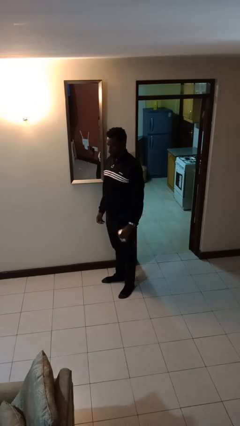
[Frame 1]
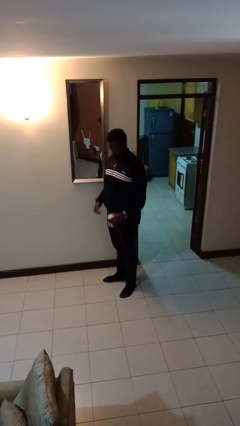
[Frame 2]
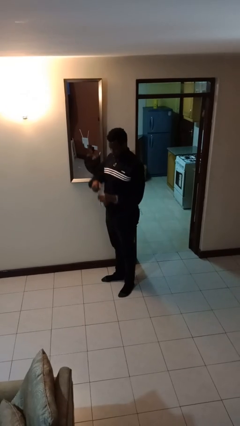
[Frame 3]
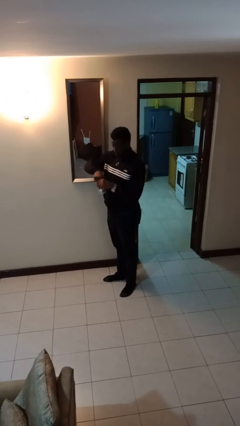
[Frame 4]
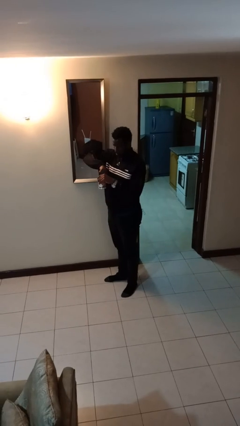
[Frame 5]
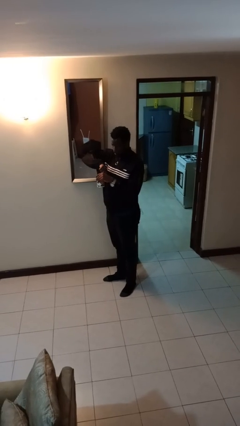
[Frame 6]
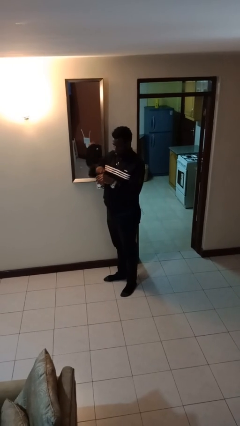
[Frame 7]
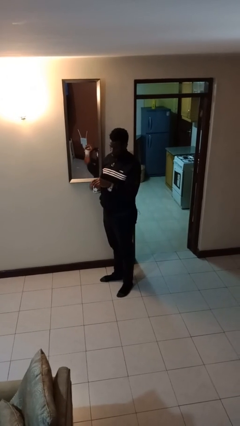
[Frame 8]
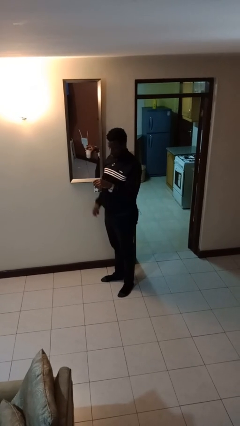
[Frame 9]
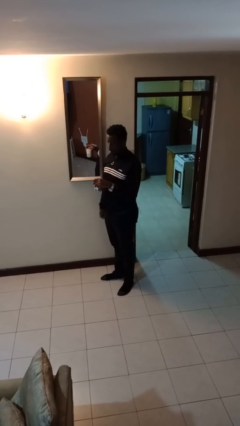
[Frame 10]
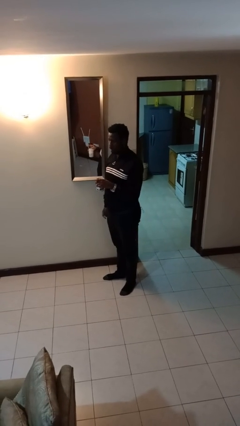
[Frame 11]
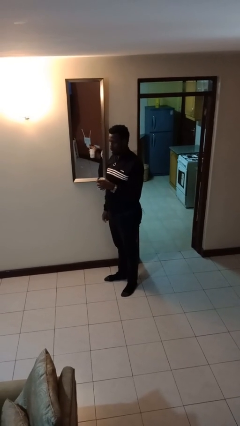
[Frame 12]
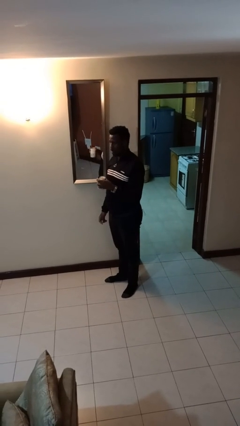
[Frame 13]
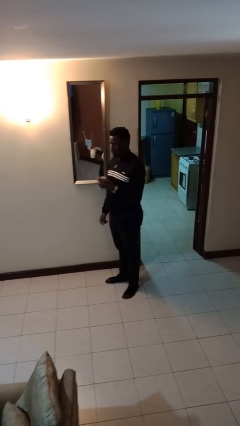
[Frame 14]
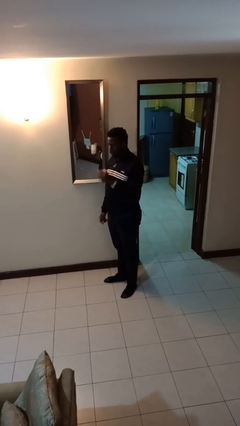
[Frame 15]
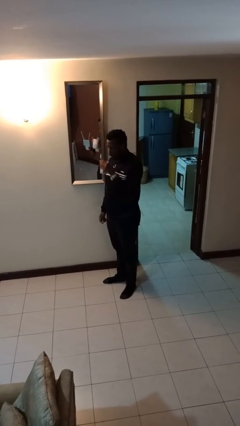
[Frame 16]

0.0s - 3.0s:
person opens beverage can

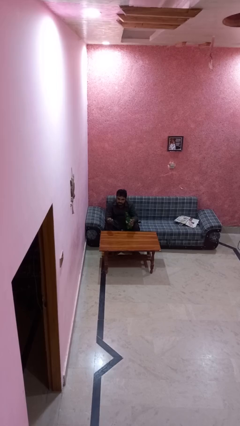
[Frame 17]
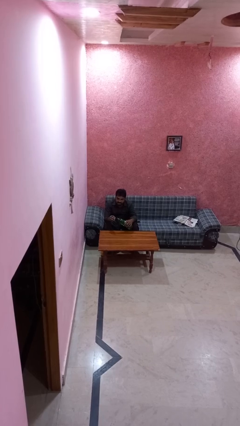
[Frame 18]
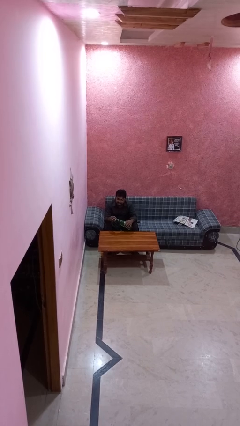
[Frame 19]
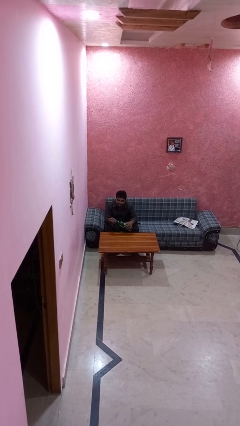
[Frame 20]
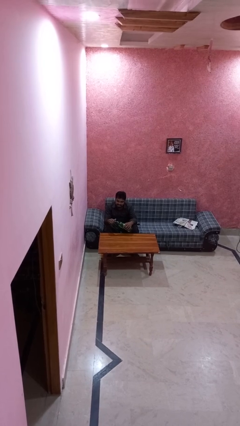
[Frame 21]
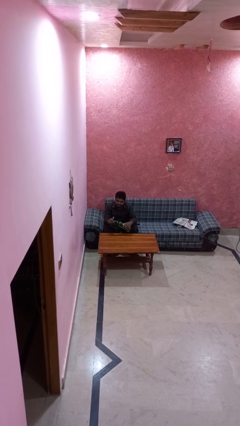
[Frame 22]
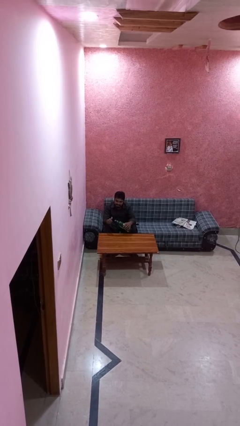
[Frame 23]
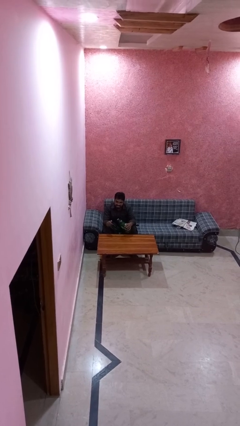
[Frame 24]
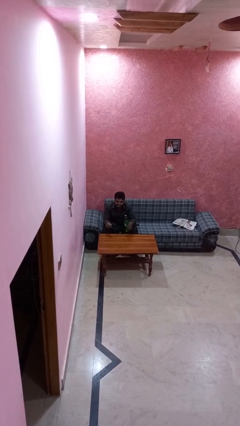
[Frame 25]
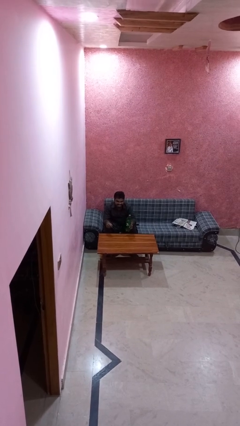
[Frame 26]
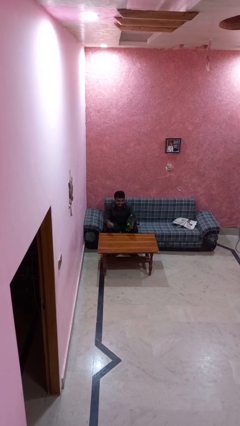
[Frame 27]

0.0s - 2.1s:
person screws lid to bottle

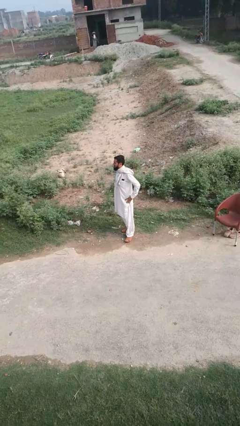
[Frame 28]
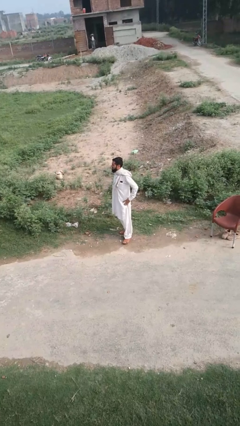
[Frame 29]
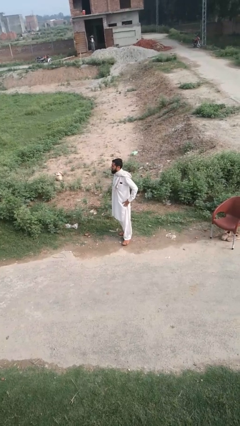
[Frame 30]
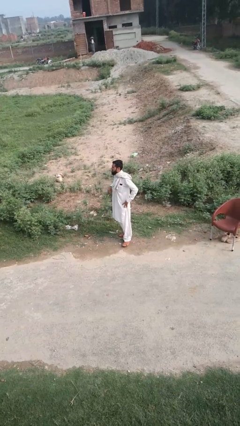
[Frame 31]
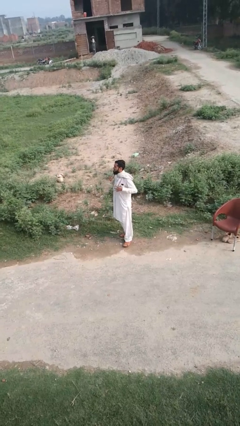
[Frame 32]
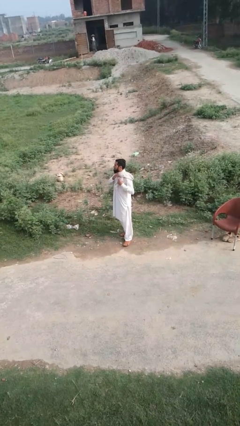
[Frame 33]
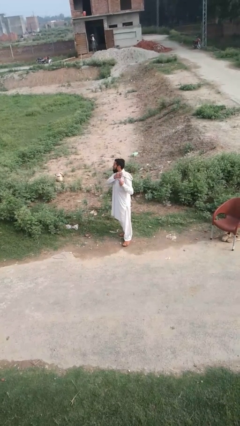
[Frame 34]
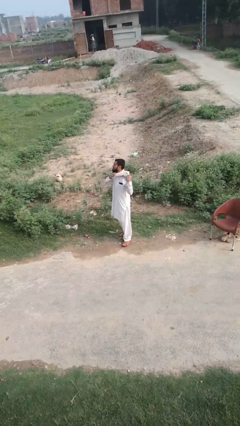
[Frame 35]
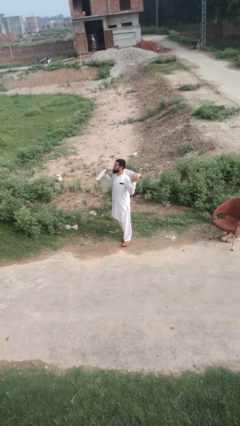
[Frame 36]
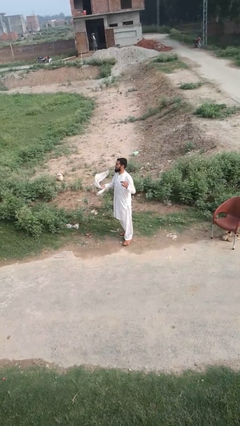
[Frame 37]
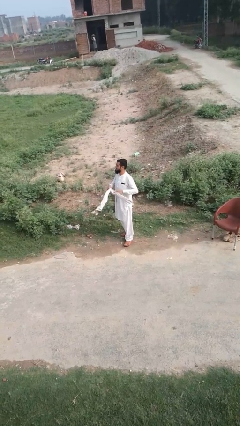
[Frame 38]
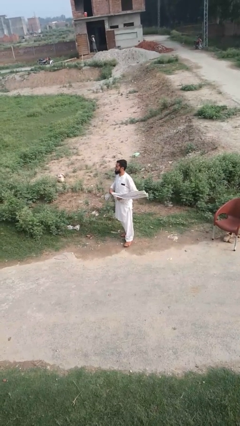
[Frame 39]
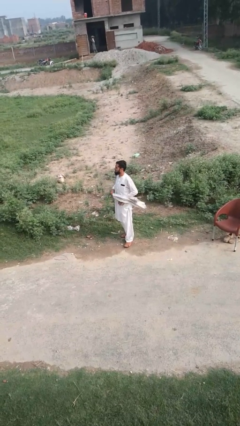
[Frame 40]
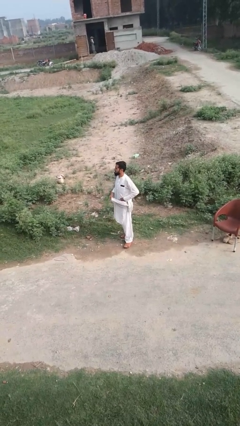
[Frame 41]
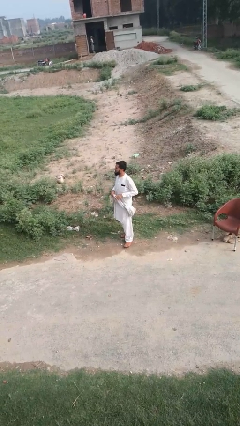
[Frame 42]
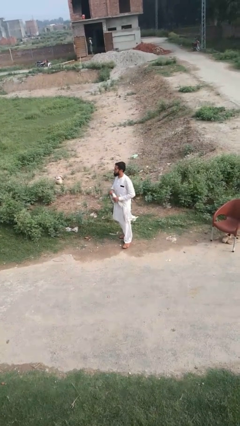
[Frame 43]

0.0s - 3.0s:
person takes off scarf

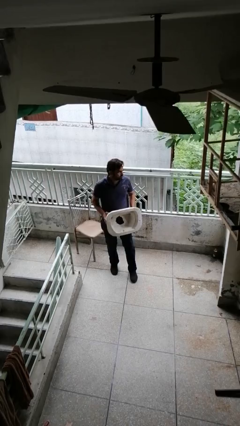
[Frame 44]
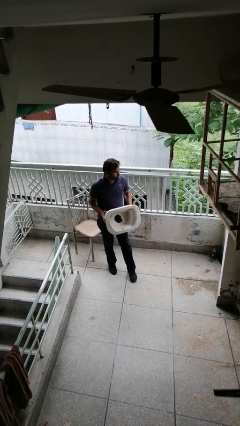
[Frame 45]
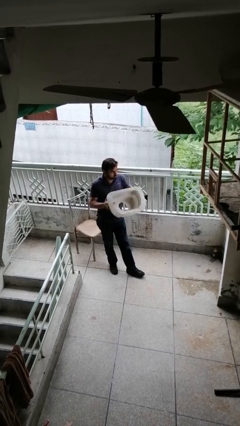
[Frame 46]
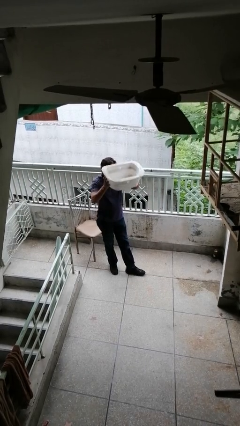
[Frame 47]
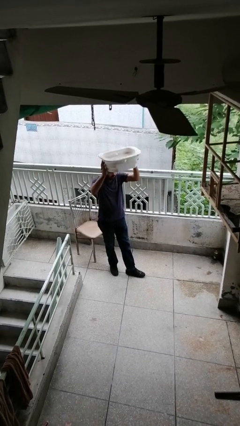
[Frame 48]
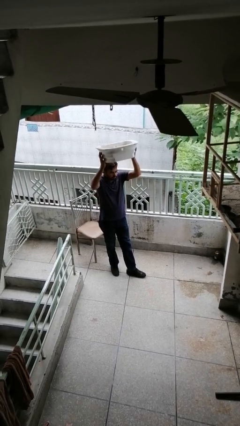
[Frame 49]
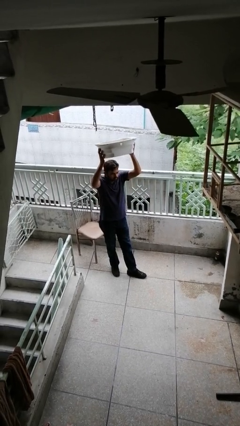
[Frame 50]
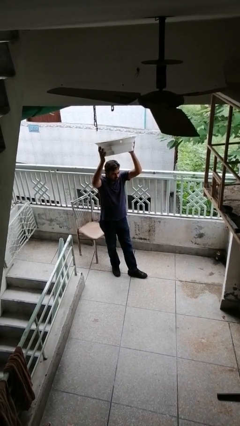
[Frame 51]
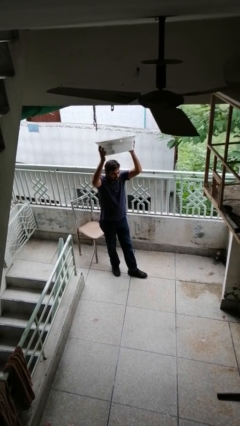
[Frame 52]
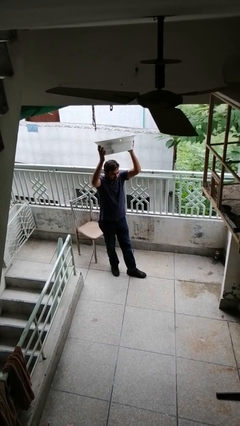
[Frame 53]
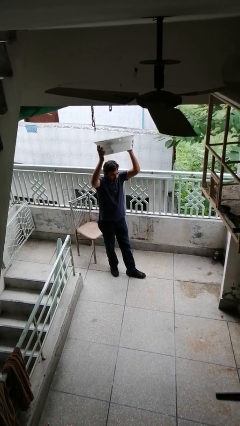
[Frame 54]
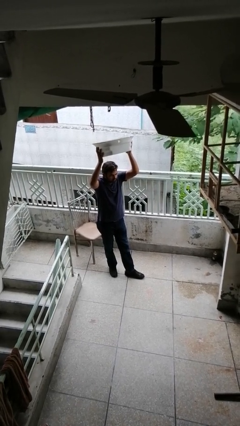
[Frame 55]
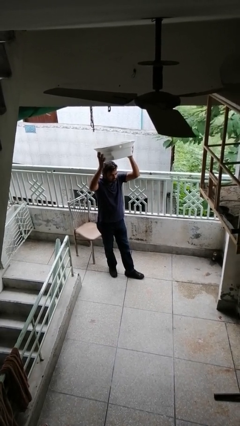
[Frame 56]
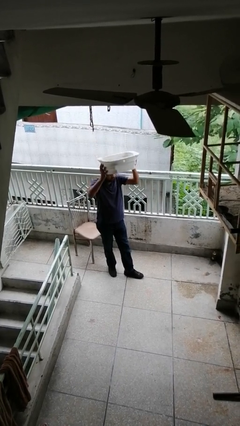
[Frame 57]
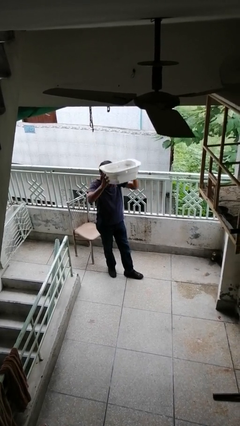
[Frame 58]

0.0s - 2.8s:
person holds object above head

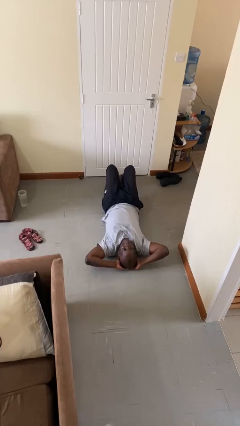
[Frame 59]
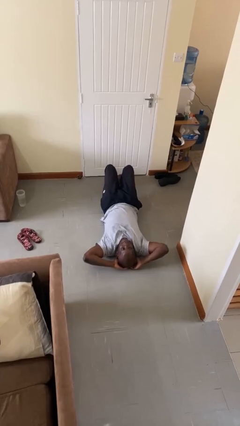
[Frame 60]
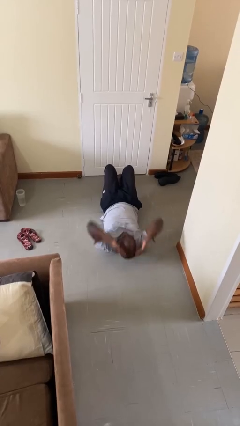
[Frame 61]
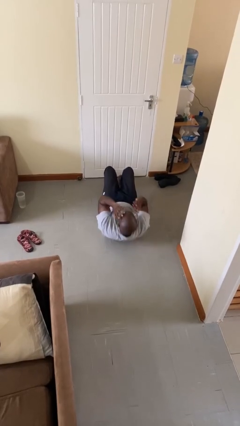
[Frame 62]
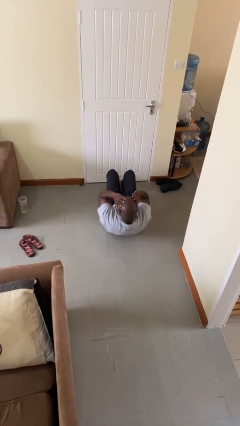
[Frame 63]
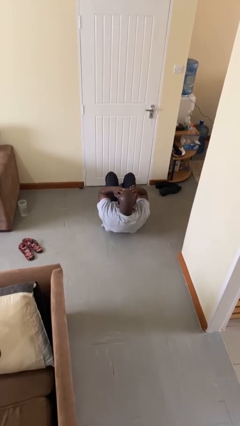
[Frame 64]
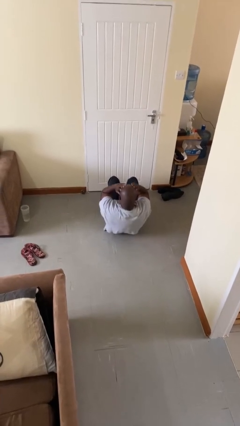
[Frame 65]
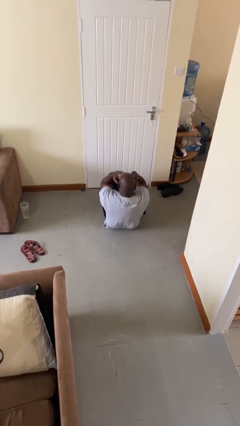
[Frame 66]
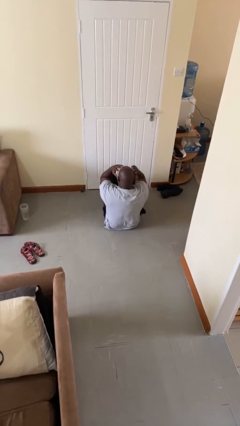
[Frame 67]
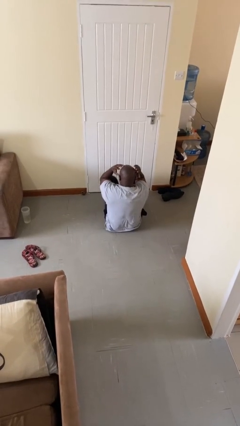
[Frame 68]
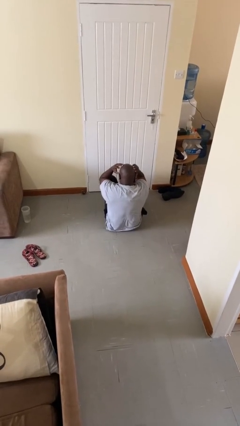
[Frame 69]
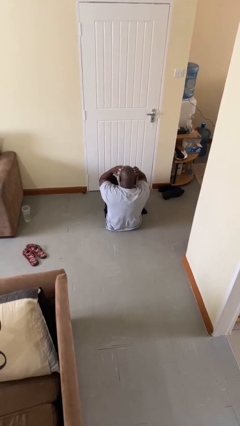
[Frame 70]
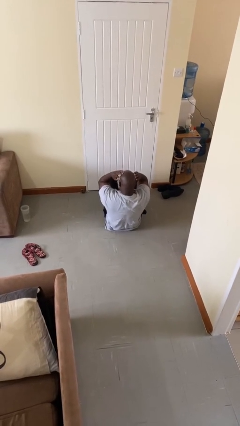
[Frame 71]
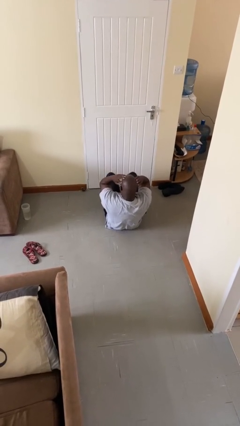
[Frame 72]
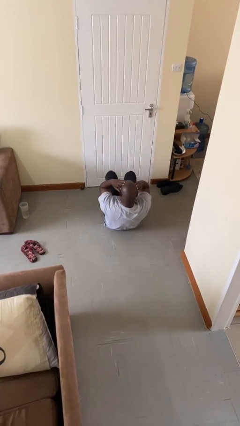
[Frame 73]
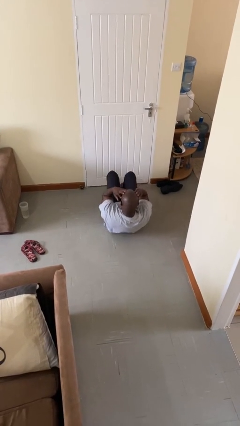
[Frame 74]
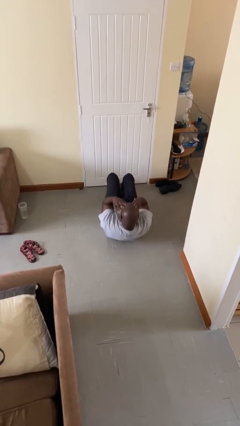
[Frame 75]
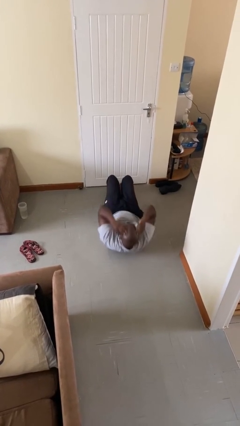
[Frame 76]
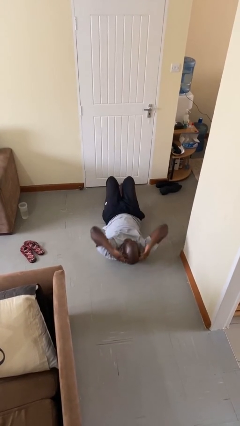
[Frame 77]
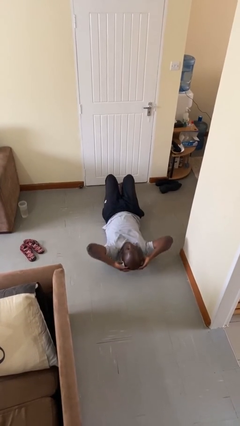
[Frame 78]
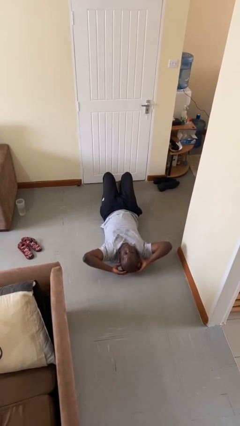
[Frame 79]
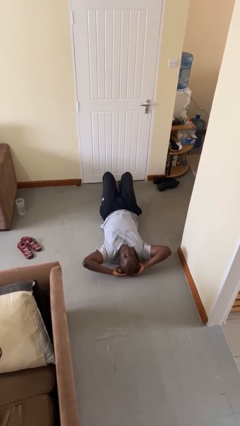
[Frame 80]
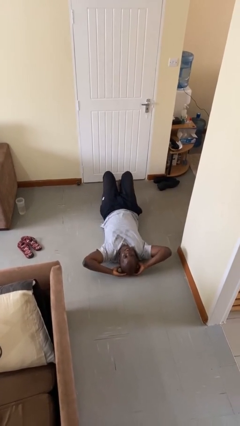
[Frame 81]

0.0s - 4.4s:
person exercises with situp

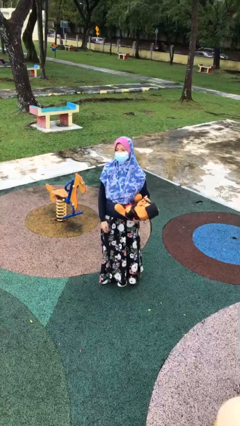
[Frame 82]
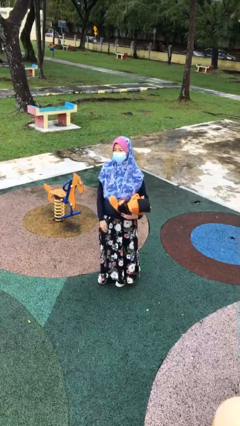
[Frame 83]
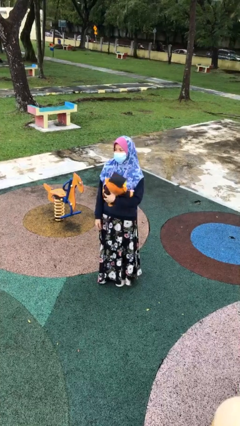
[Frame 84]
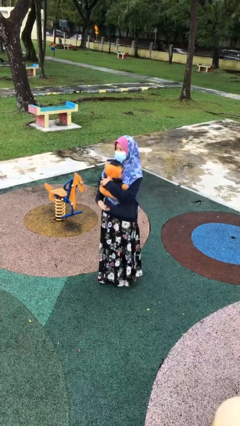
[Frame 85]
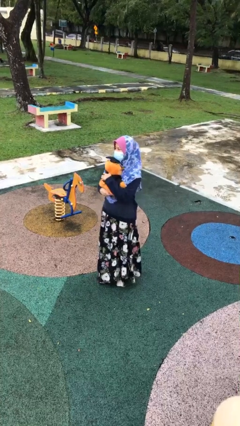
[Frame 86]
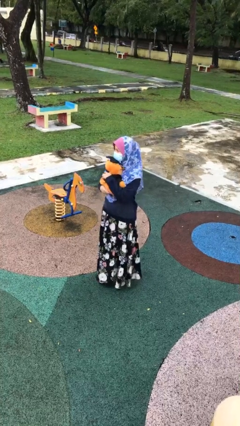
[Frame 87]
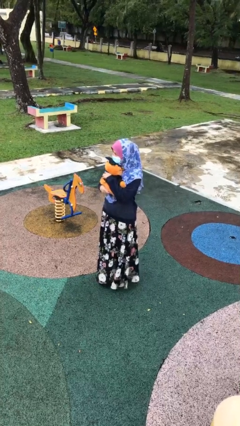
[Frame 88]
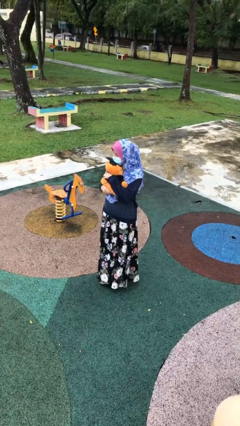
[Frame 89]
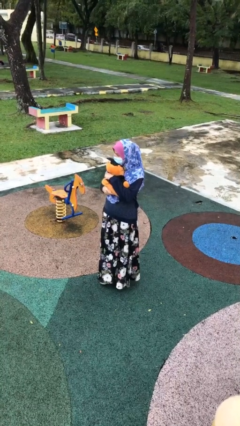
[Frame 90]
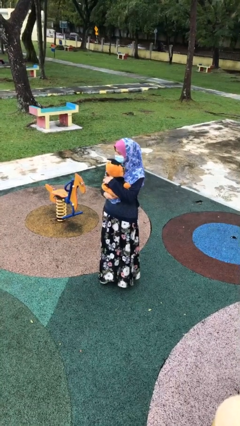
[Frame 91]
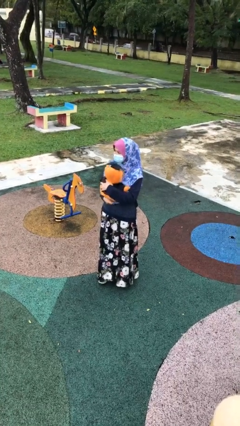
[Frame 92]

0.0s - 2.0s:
person hugs stuffed animal
